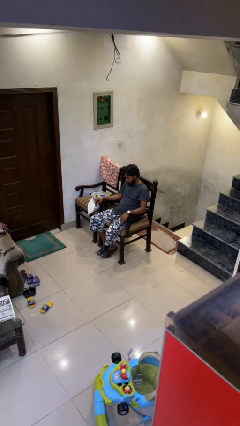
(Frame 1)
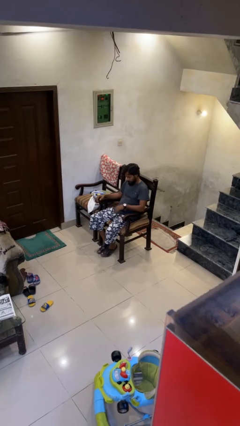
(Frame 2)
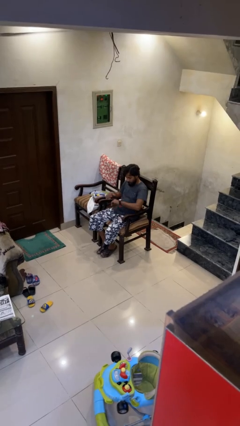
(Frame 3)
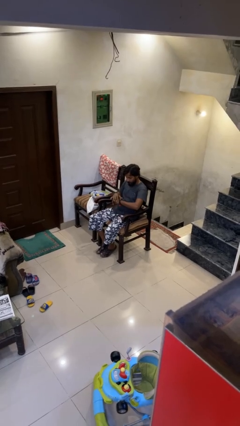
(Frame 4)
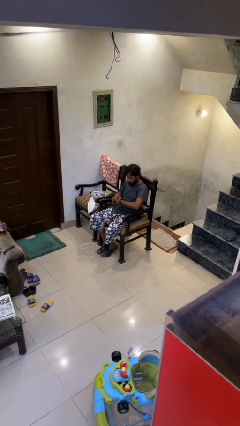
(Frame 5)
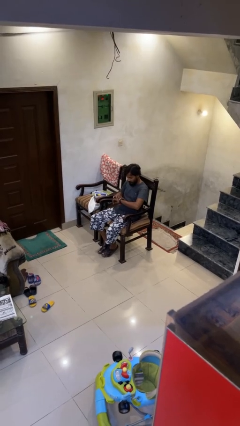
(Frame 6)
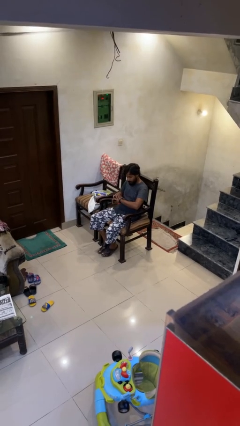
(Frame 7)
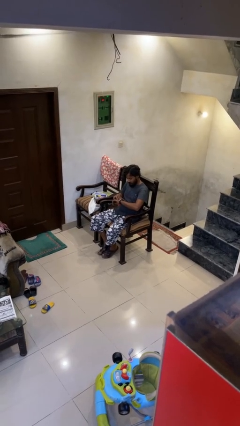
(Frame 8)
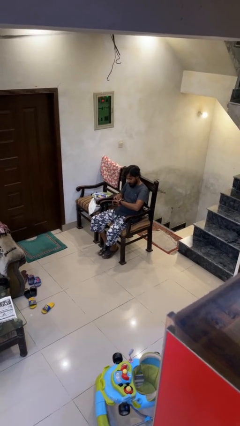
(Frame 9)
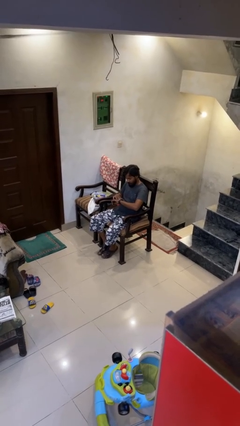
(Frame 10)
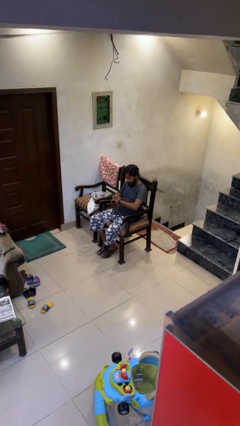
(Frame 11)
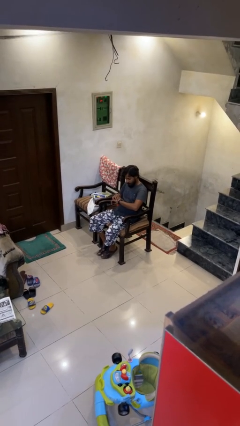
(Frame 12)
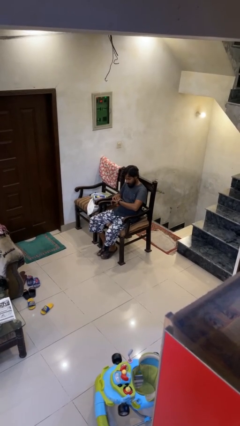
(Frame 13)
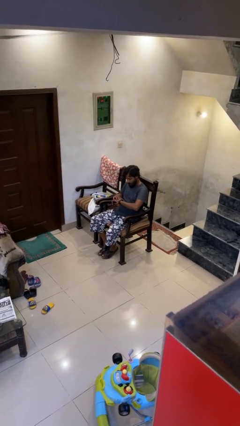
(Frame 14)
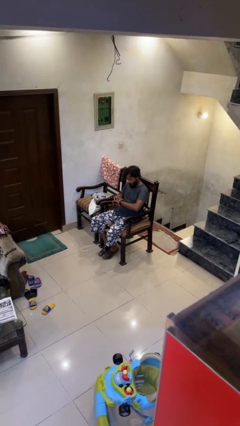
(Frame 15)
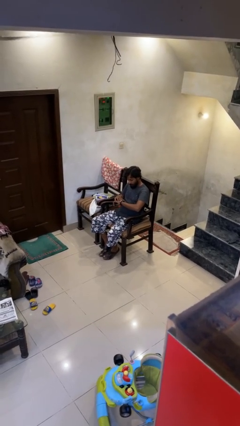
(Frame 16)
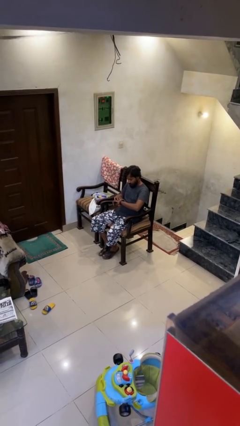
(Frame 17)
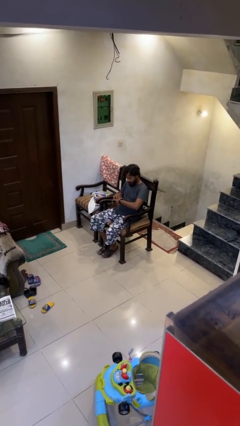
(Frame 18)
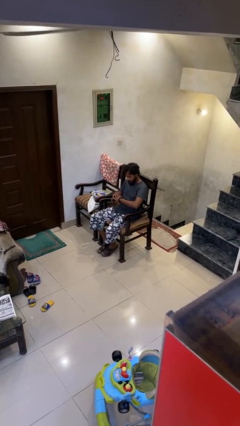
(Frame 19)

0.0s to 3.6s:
person looks at wristwatch

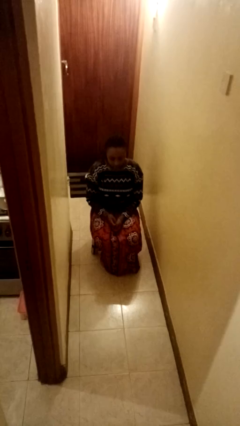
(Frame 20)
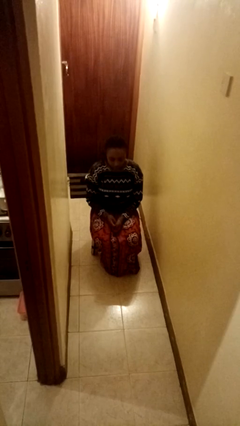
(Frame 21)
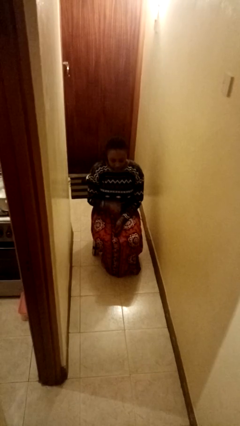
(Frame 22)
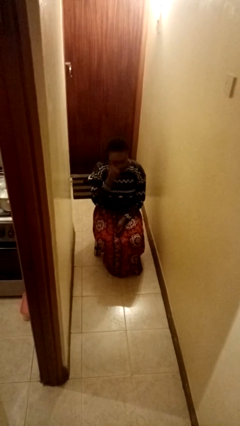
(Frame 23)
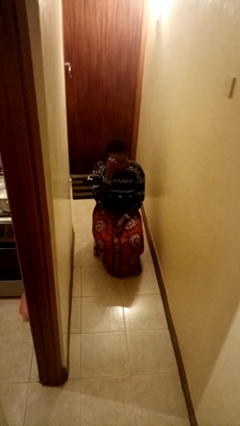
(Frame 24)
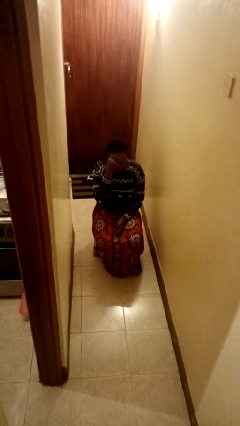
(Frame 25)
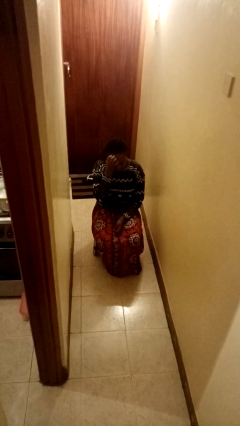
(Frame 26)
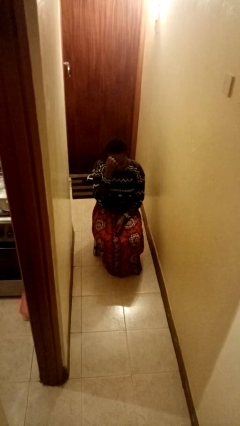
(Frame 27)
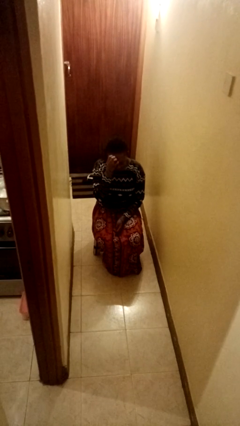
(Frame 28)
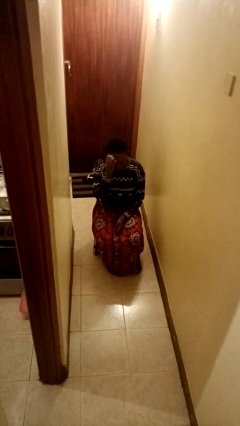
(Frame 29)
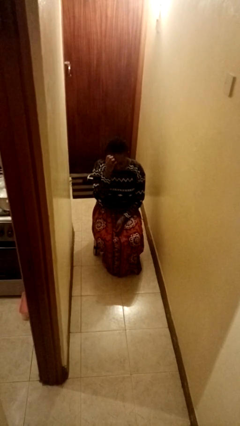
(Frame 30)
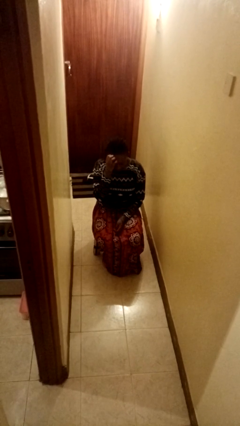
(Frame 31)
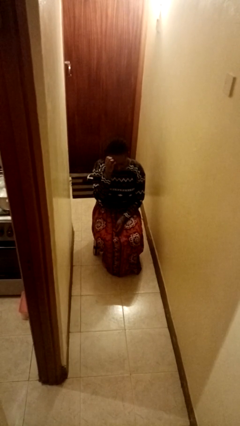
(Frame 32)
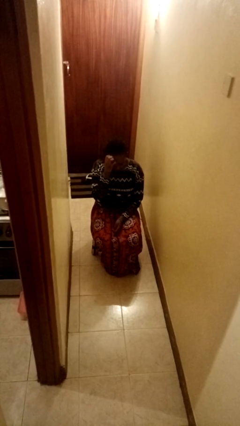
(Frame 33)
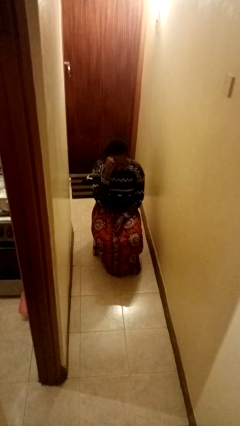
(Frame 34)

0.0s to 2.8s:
person scratches face

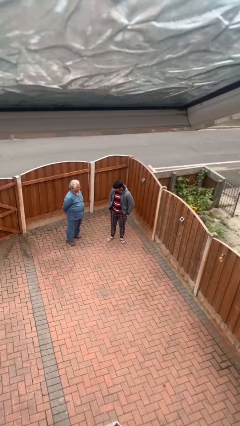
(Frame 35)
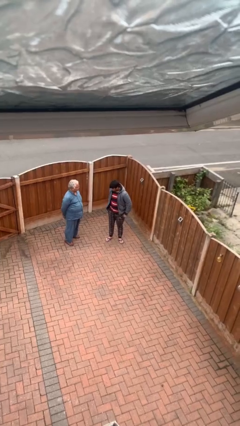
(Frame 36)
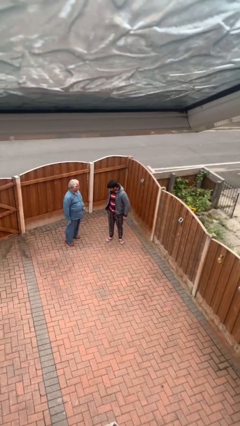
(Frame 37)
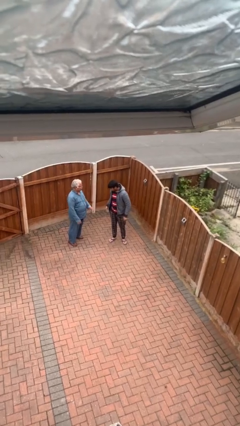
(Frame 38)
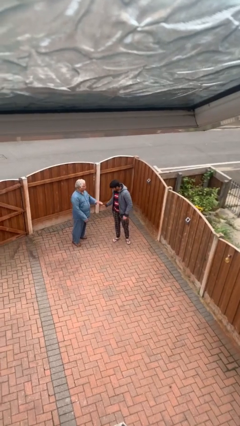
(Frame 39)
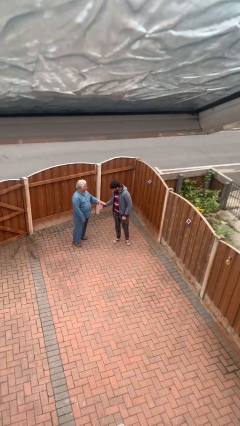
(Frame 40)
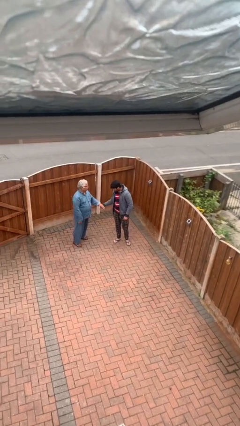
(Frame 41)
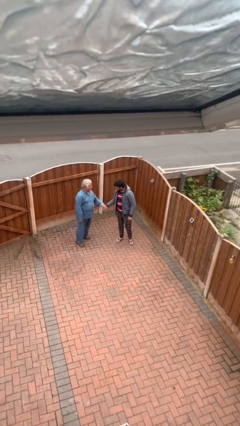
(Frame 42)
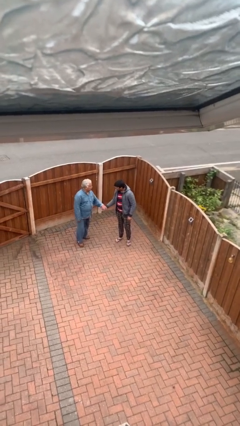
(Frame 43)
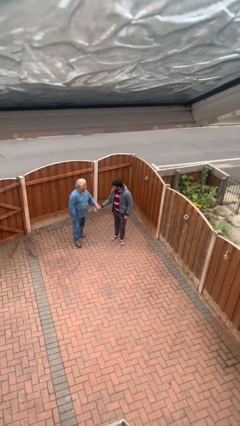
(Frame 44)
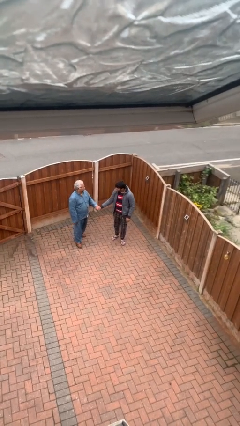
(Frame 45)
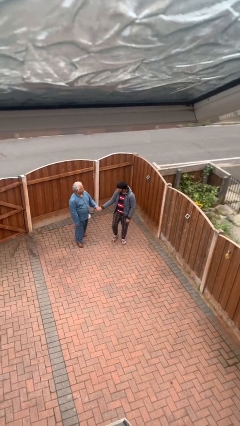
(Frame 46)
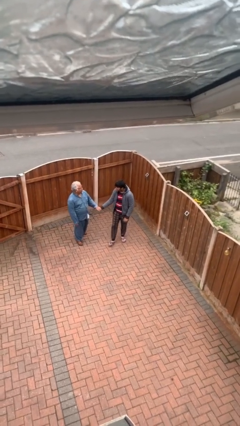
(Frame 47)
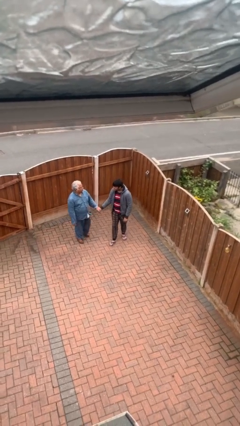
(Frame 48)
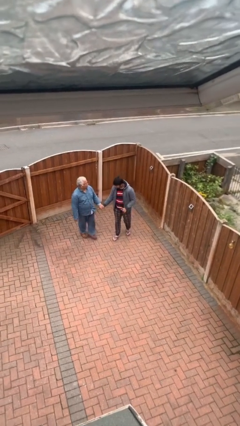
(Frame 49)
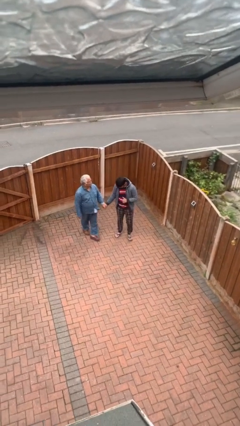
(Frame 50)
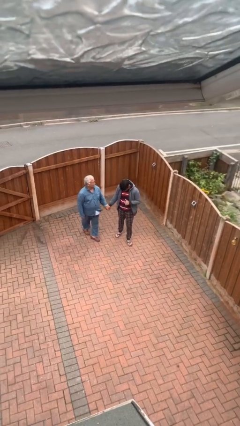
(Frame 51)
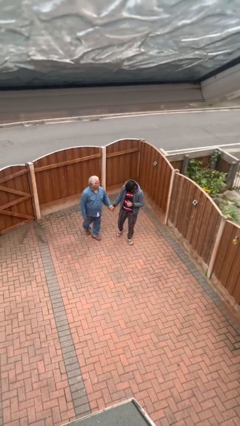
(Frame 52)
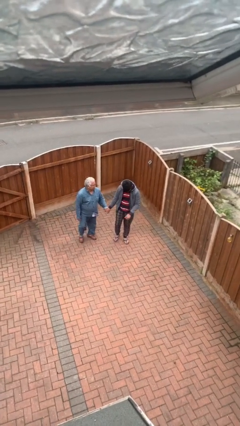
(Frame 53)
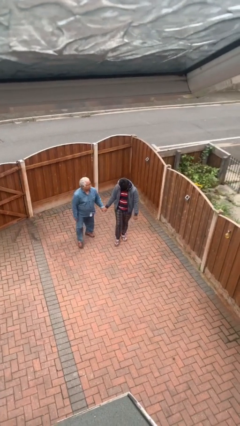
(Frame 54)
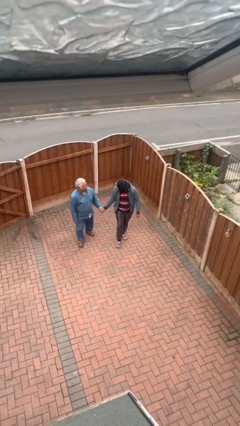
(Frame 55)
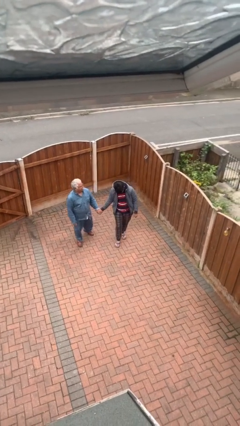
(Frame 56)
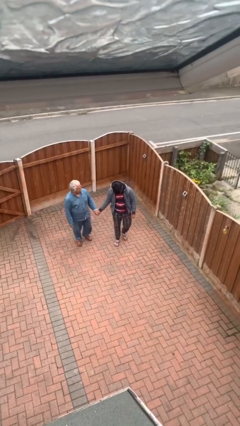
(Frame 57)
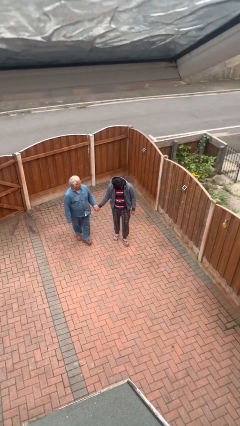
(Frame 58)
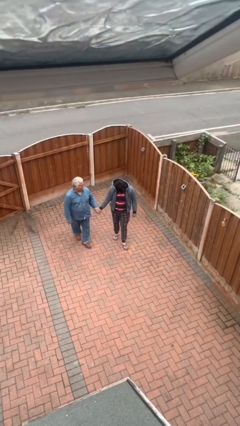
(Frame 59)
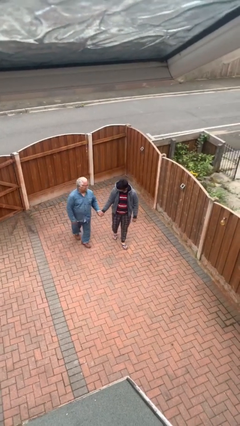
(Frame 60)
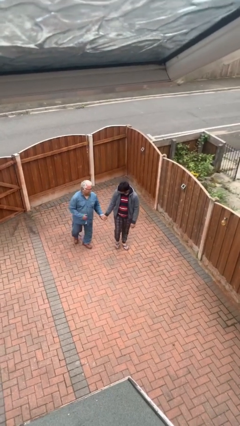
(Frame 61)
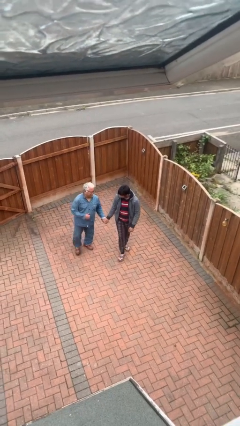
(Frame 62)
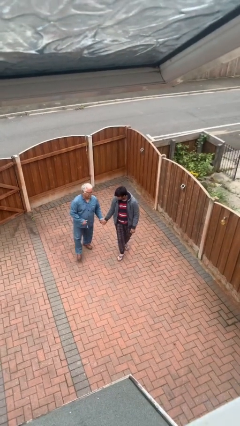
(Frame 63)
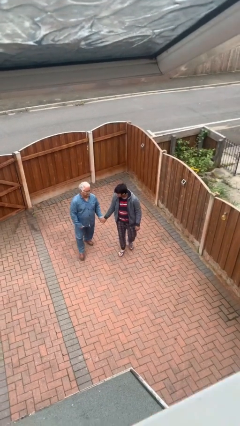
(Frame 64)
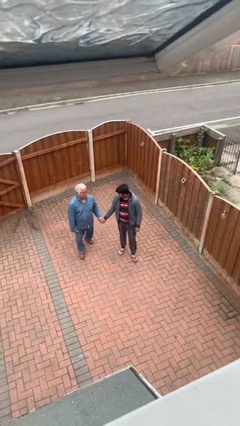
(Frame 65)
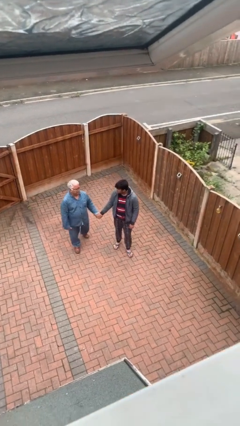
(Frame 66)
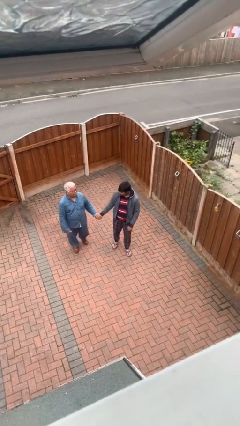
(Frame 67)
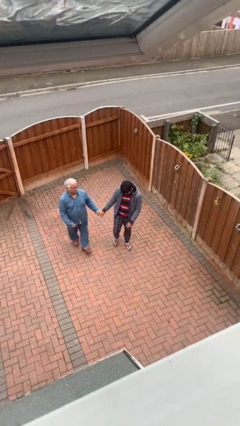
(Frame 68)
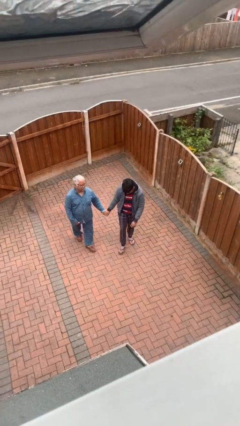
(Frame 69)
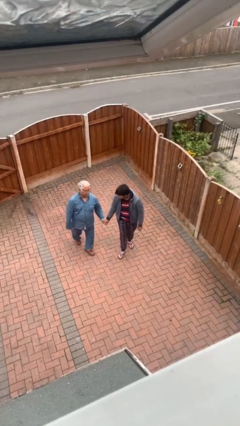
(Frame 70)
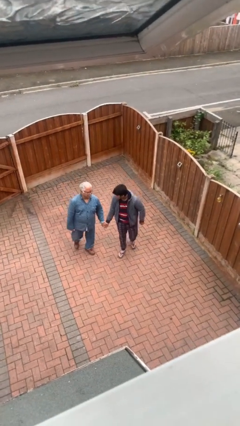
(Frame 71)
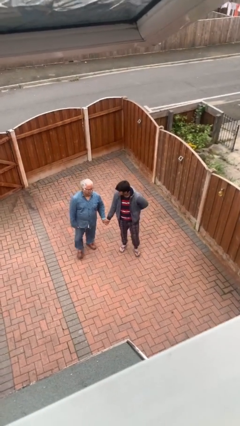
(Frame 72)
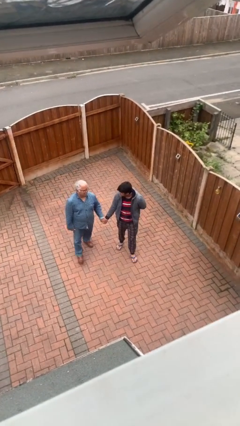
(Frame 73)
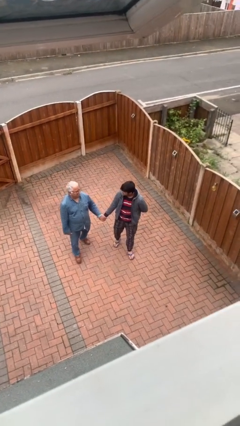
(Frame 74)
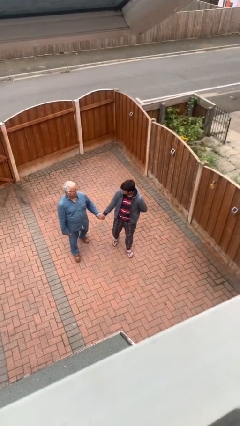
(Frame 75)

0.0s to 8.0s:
person holds hand

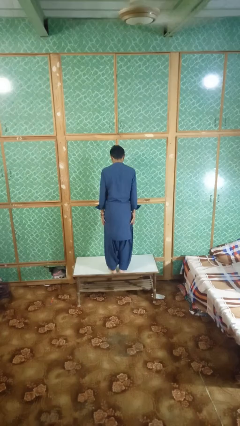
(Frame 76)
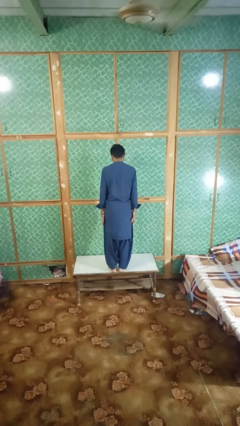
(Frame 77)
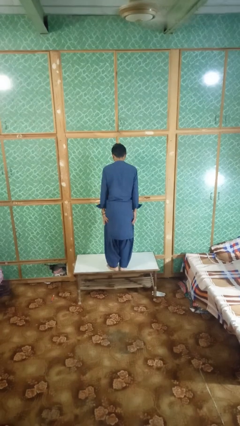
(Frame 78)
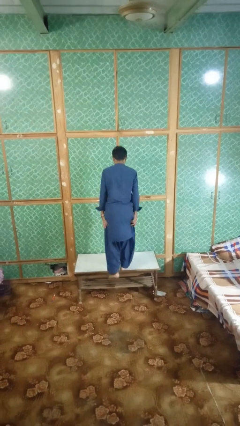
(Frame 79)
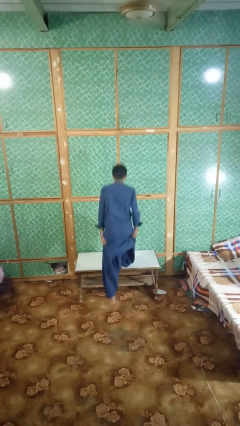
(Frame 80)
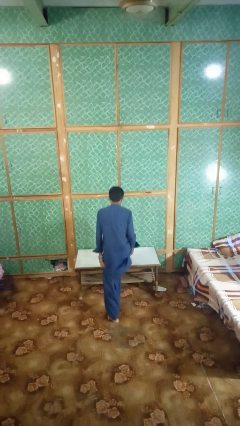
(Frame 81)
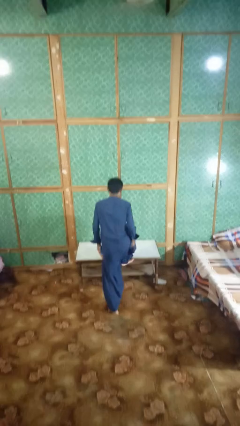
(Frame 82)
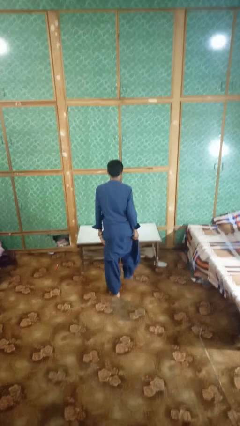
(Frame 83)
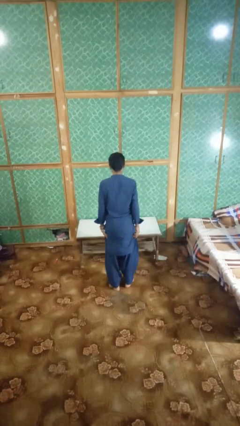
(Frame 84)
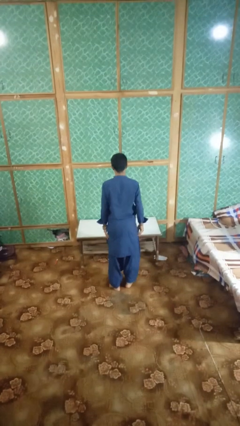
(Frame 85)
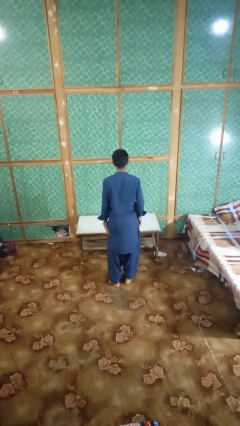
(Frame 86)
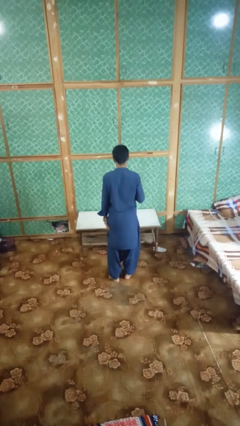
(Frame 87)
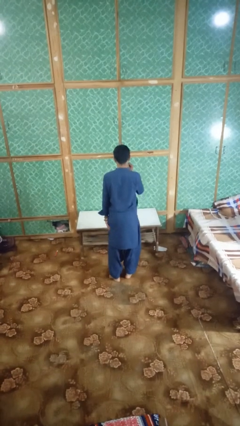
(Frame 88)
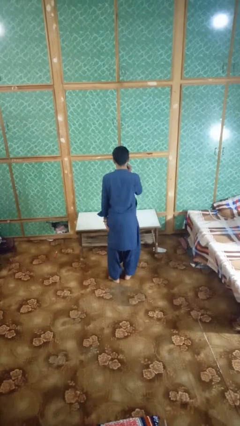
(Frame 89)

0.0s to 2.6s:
person climbs off table

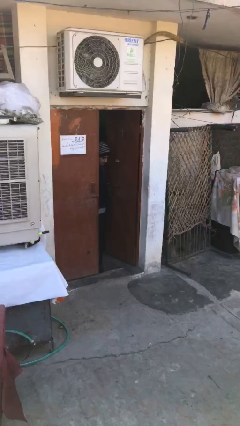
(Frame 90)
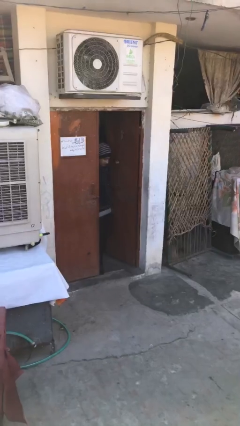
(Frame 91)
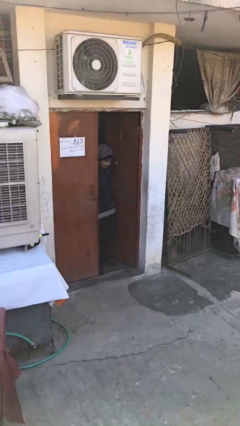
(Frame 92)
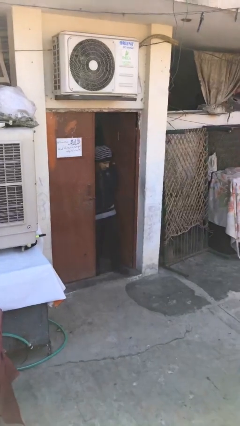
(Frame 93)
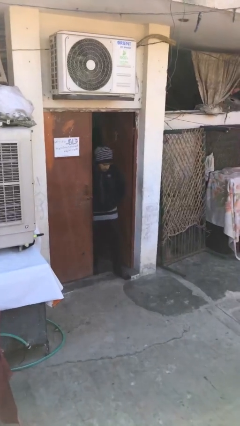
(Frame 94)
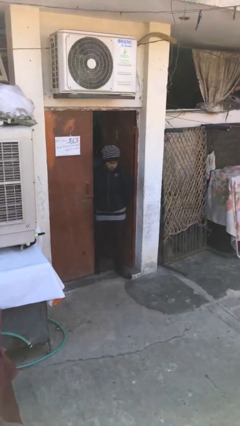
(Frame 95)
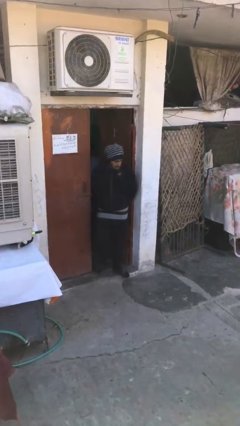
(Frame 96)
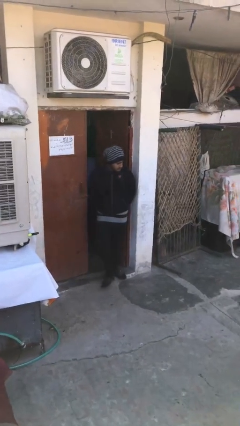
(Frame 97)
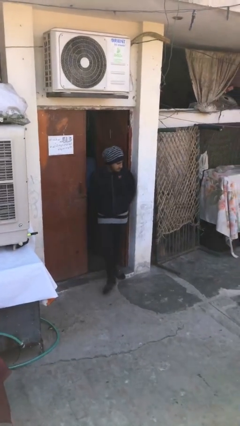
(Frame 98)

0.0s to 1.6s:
person enters scene through structure
